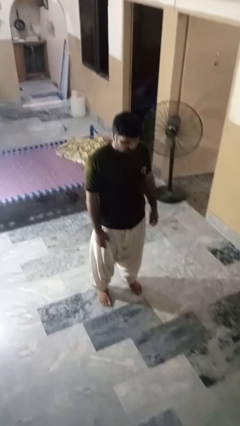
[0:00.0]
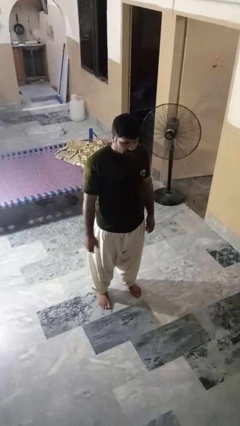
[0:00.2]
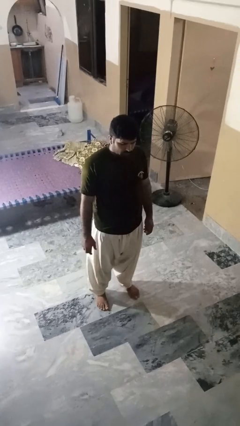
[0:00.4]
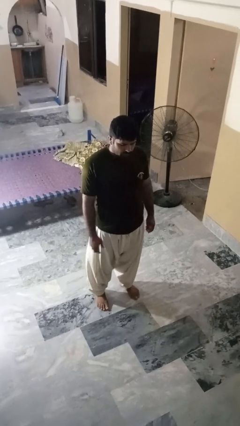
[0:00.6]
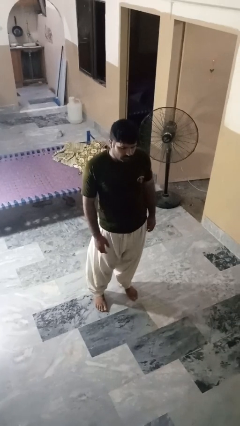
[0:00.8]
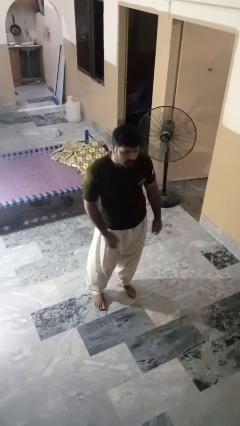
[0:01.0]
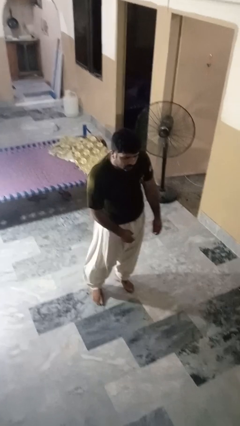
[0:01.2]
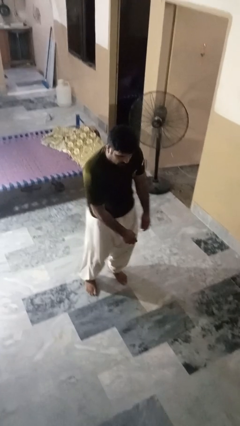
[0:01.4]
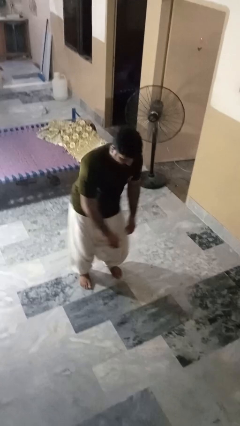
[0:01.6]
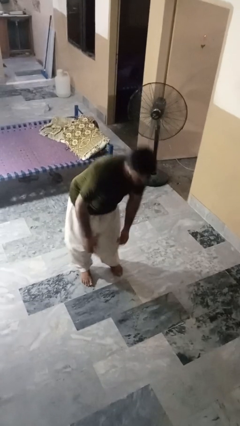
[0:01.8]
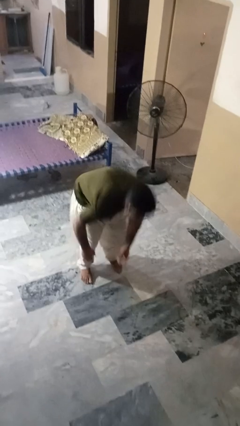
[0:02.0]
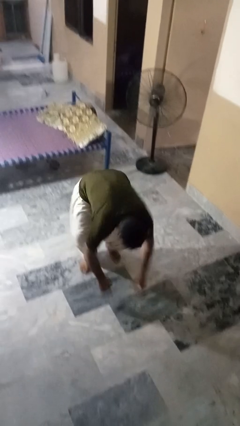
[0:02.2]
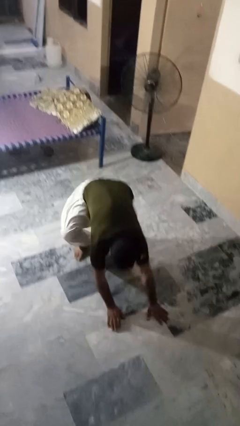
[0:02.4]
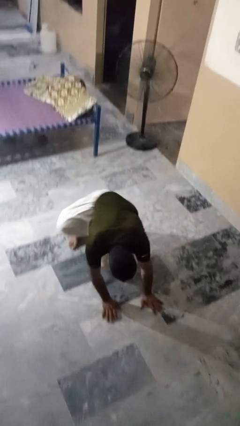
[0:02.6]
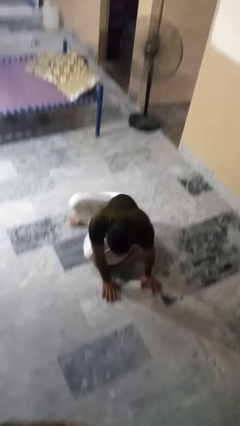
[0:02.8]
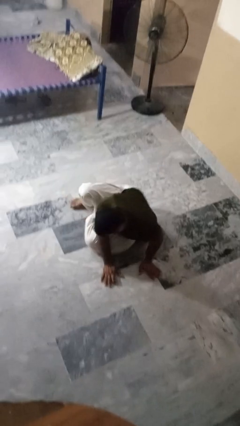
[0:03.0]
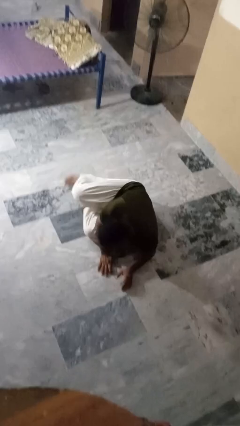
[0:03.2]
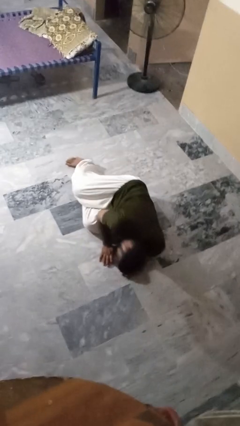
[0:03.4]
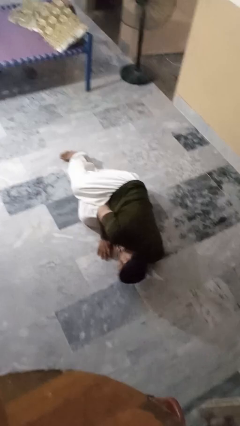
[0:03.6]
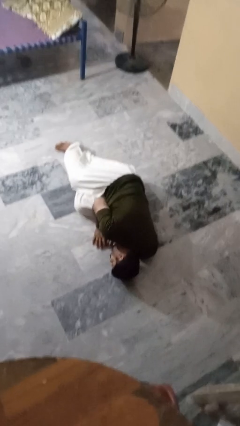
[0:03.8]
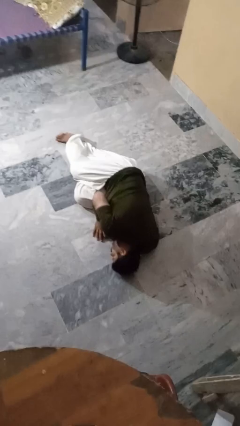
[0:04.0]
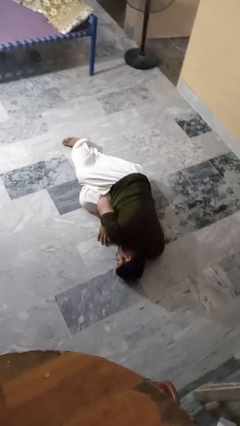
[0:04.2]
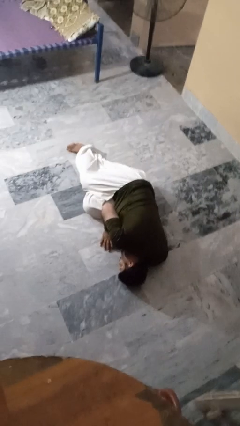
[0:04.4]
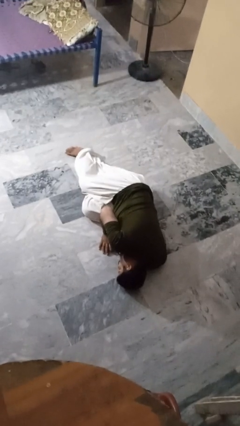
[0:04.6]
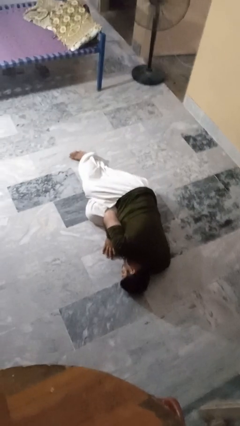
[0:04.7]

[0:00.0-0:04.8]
person falls while standing

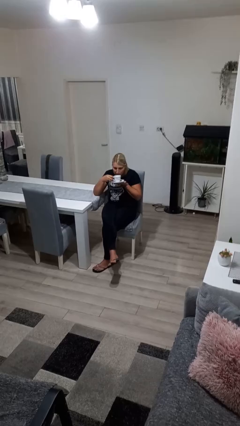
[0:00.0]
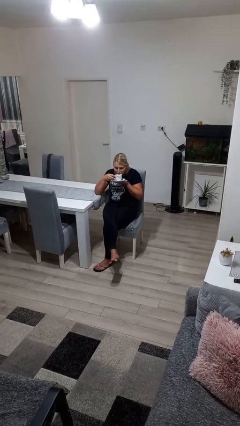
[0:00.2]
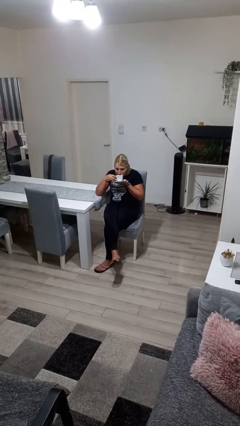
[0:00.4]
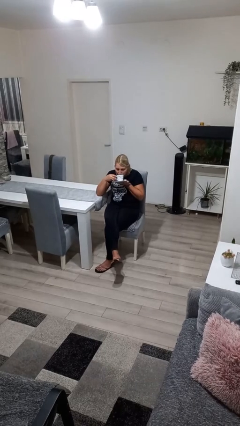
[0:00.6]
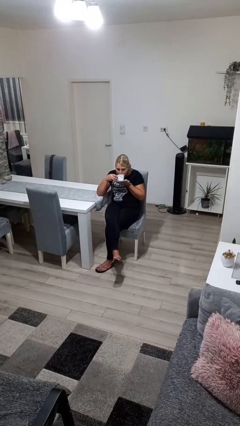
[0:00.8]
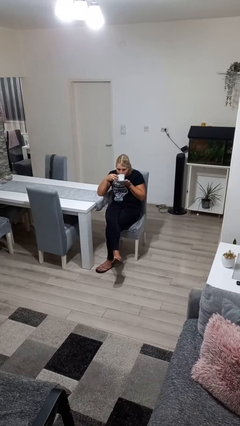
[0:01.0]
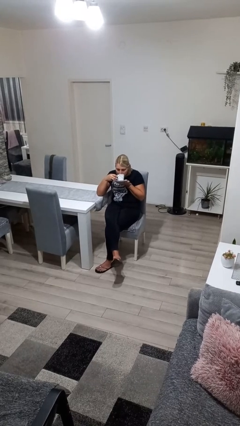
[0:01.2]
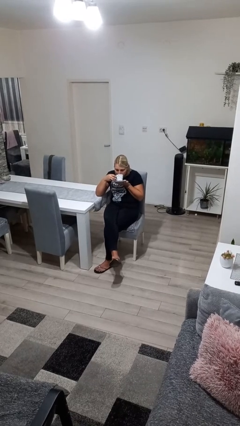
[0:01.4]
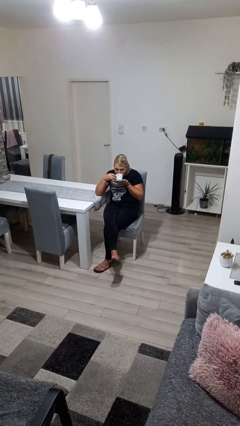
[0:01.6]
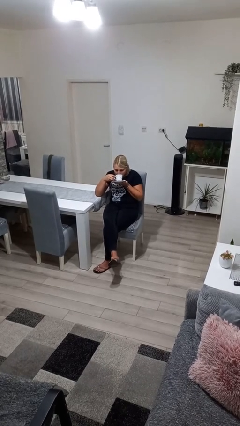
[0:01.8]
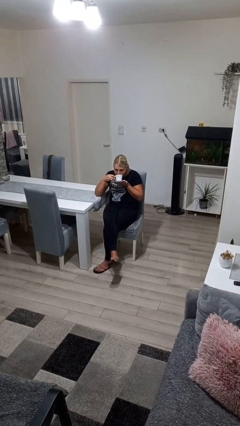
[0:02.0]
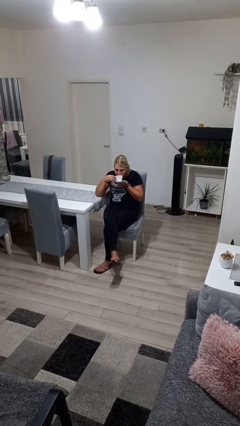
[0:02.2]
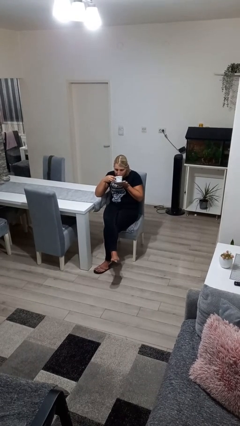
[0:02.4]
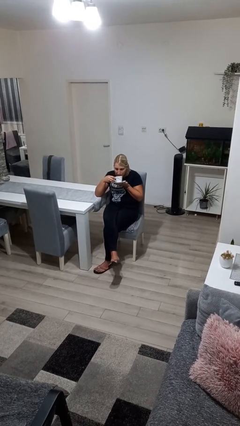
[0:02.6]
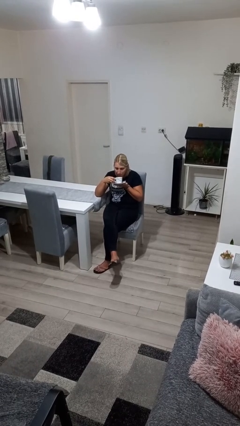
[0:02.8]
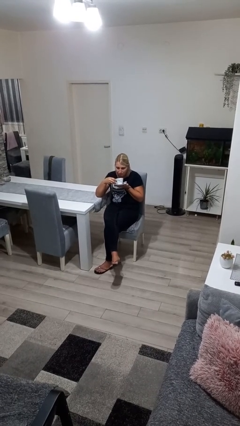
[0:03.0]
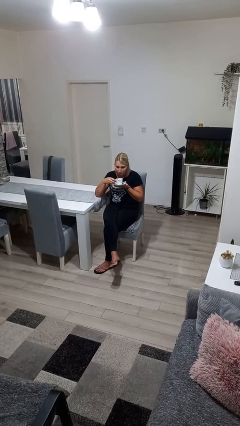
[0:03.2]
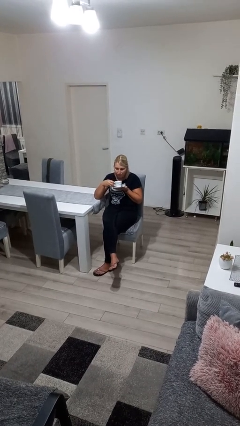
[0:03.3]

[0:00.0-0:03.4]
person drinks from straw

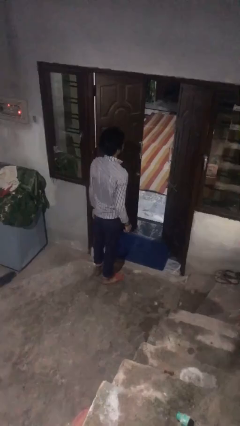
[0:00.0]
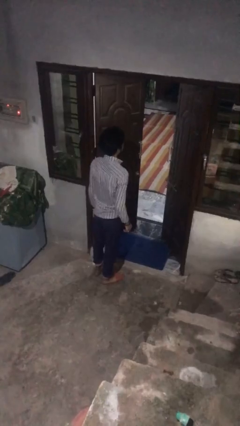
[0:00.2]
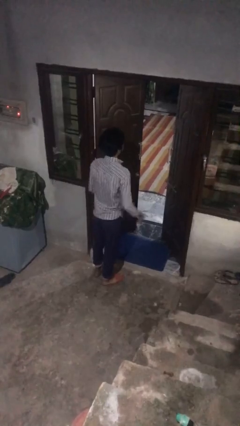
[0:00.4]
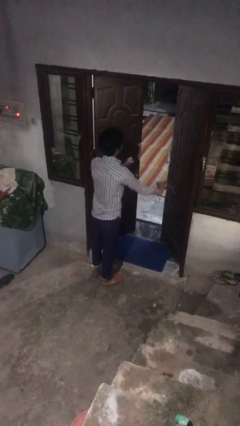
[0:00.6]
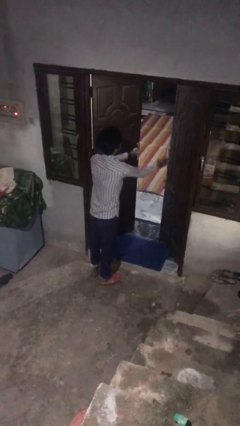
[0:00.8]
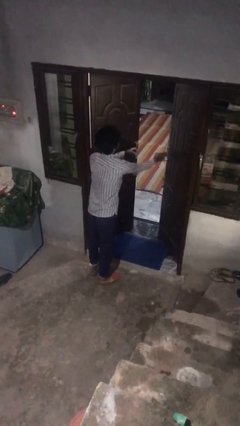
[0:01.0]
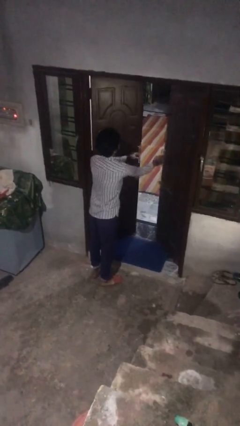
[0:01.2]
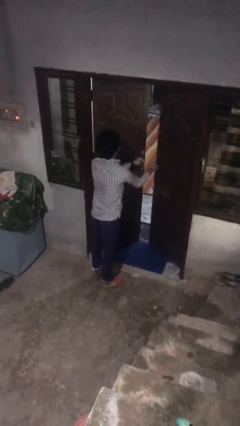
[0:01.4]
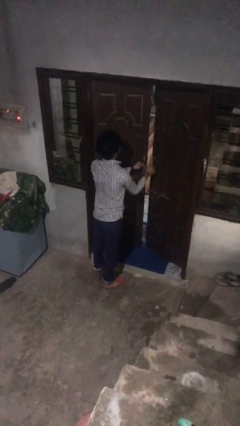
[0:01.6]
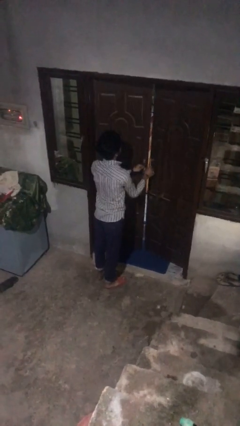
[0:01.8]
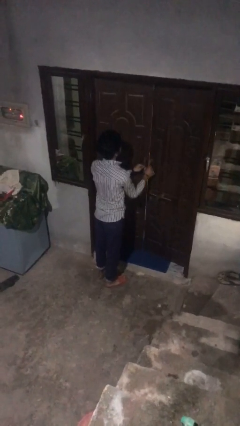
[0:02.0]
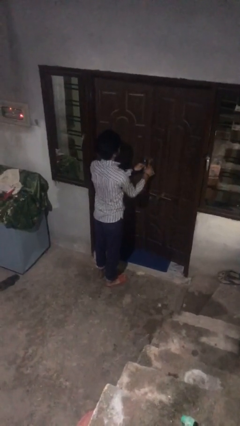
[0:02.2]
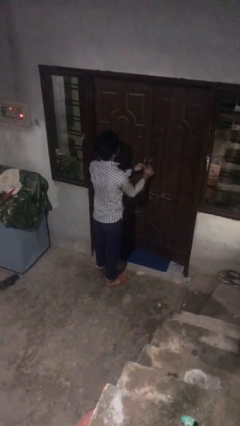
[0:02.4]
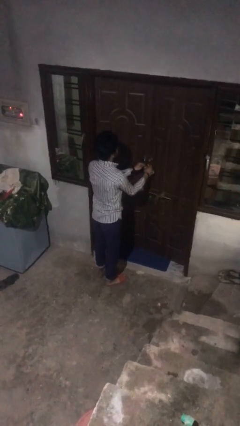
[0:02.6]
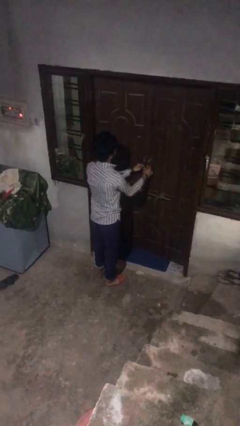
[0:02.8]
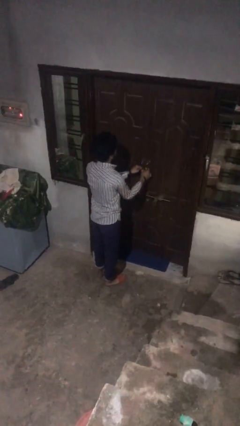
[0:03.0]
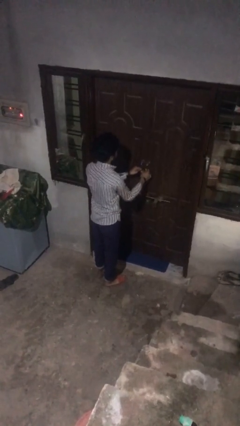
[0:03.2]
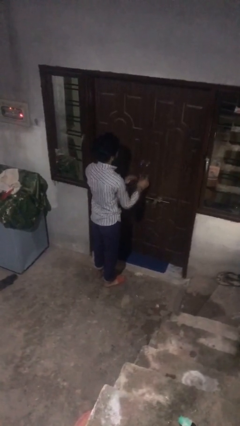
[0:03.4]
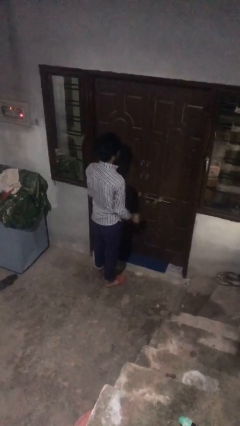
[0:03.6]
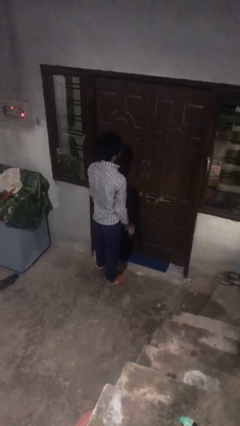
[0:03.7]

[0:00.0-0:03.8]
person closes facility door

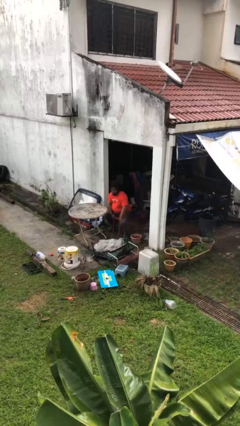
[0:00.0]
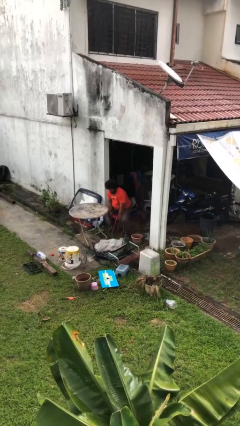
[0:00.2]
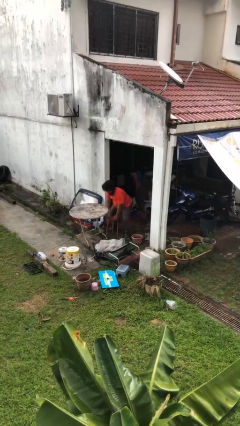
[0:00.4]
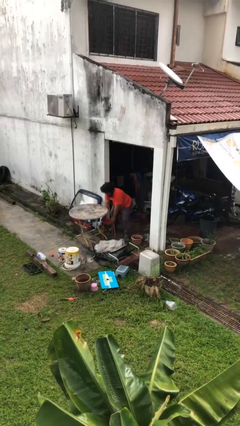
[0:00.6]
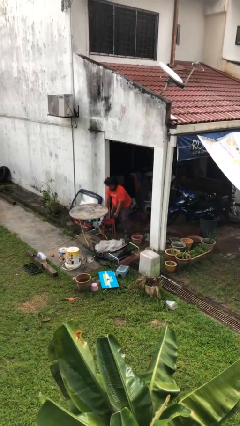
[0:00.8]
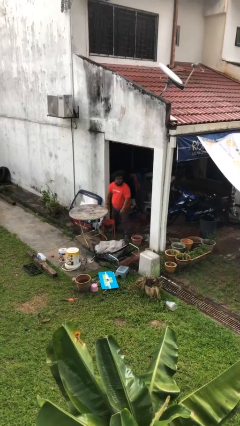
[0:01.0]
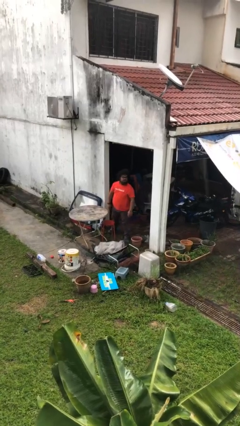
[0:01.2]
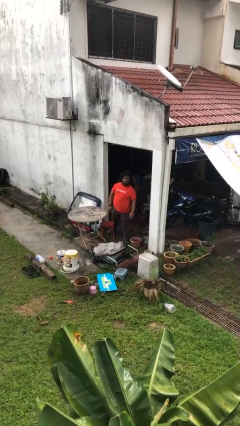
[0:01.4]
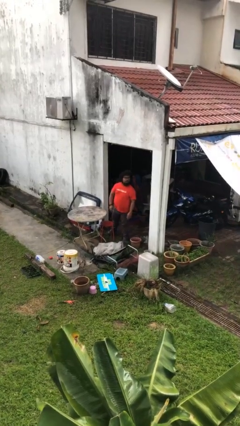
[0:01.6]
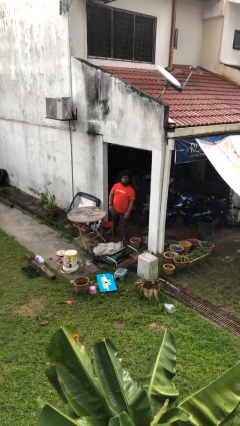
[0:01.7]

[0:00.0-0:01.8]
person stands up

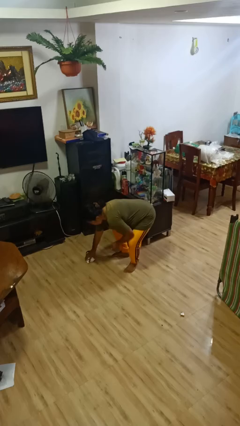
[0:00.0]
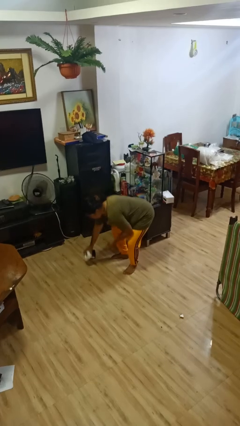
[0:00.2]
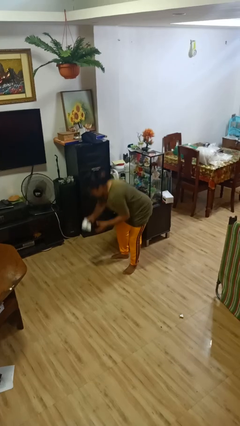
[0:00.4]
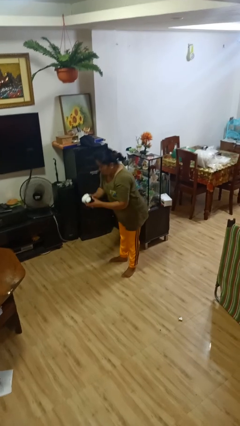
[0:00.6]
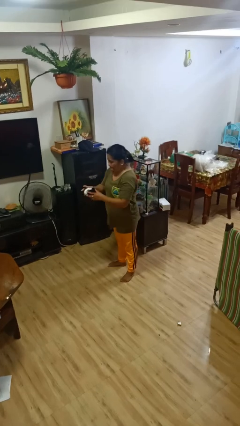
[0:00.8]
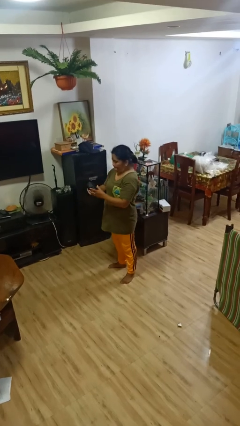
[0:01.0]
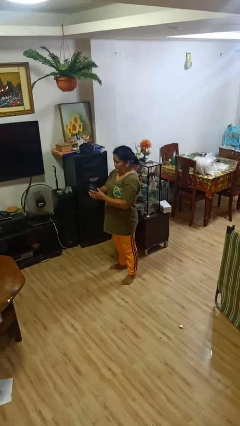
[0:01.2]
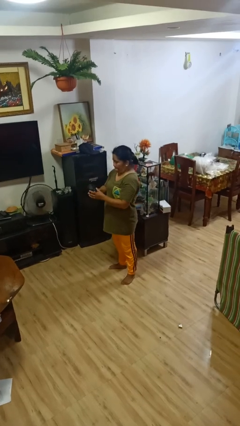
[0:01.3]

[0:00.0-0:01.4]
person picks up object from floor

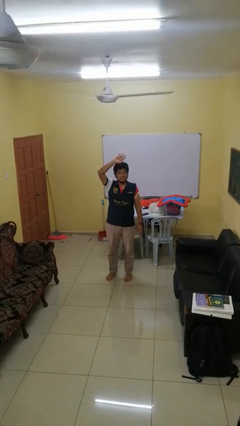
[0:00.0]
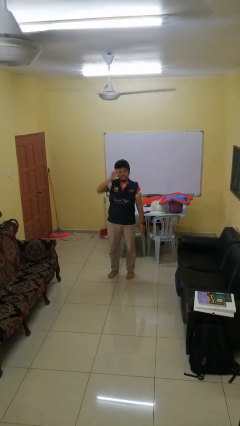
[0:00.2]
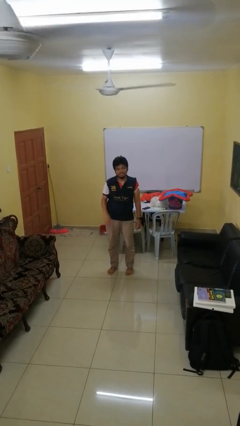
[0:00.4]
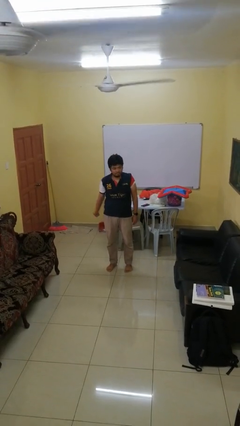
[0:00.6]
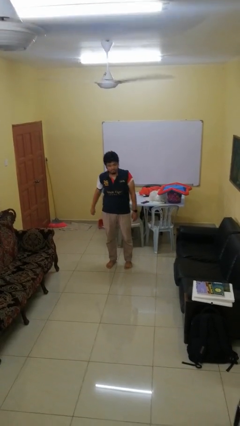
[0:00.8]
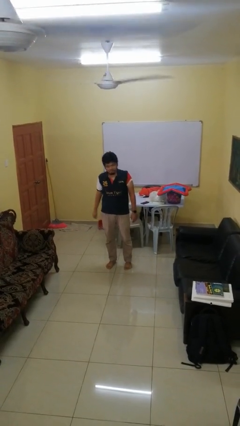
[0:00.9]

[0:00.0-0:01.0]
person gestures lower hand

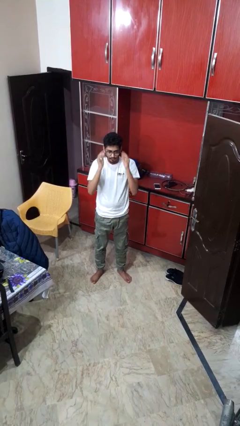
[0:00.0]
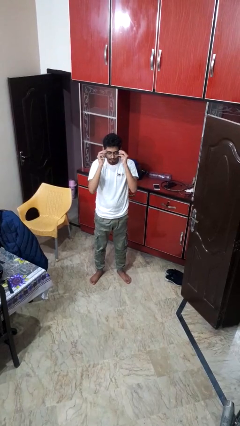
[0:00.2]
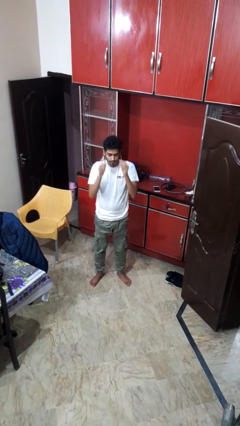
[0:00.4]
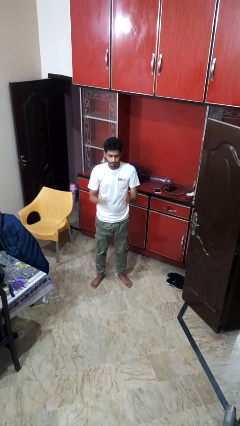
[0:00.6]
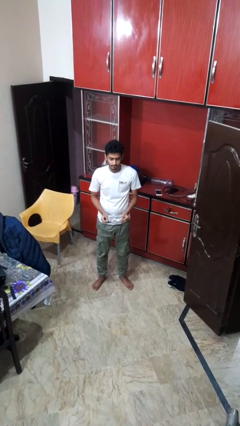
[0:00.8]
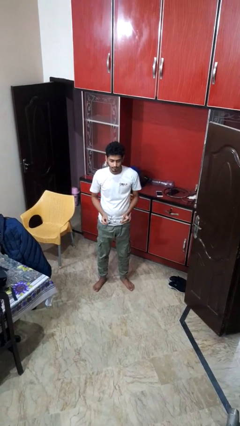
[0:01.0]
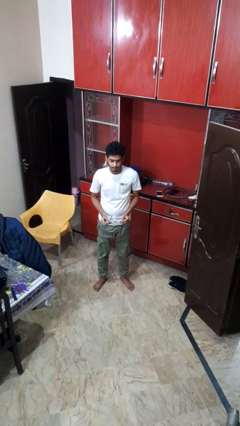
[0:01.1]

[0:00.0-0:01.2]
person takes off glasses
